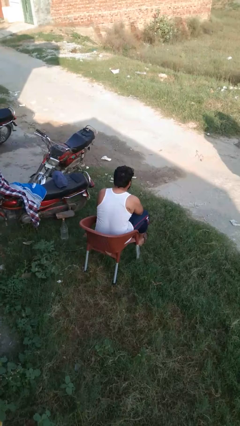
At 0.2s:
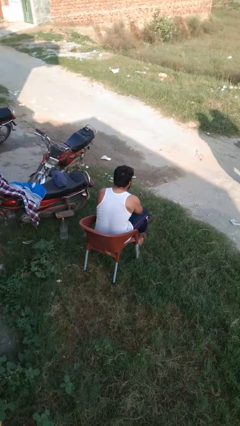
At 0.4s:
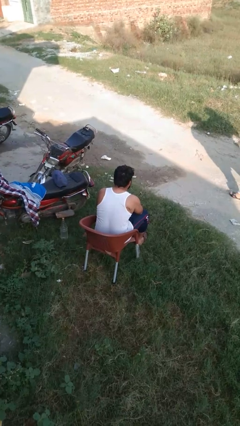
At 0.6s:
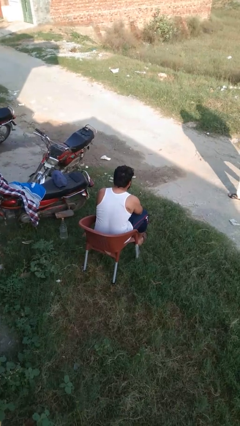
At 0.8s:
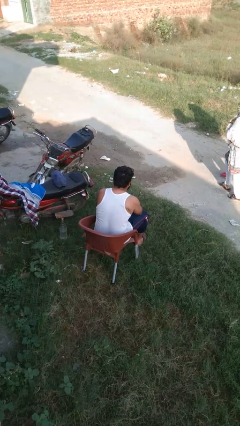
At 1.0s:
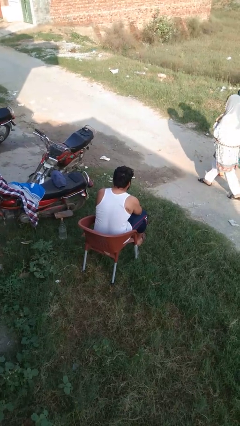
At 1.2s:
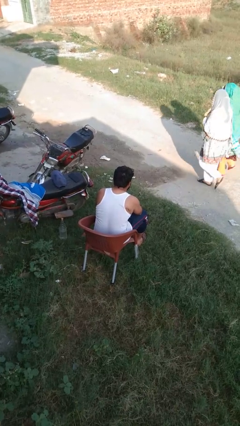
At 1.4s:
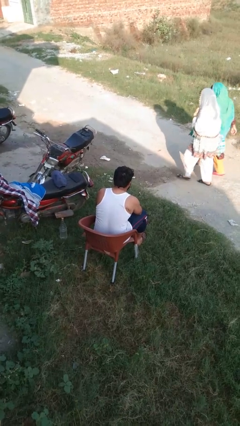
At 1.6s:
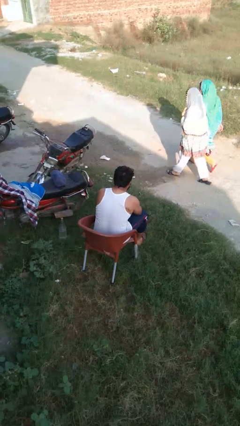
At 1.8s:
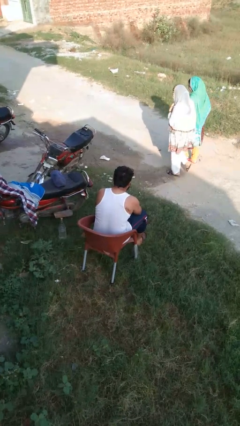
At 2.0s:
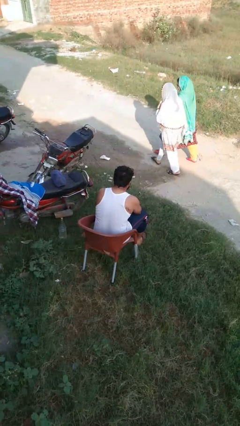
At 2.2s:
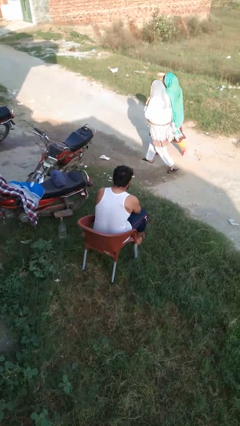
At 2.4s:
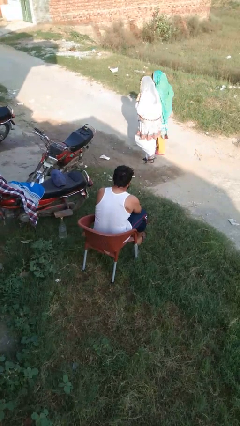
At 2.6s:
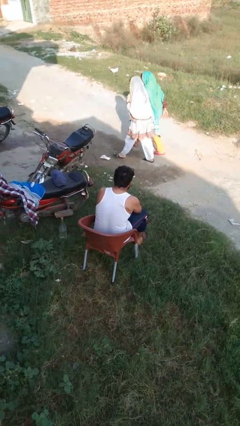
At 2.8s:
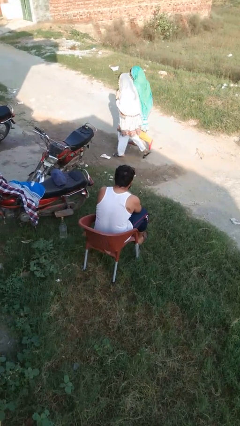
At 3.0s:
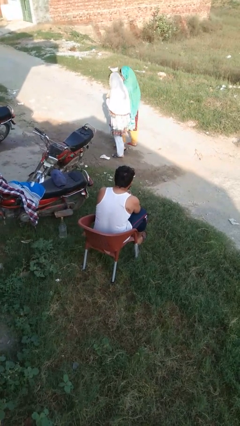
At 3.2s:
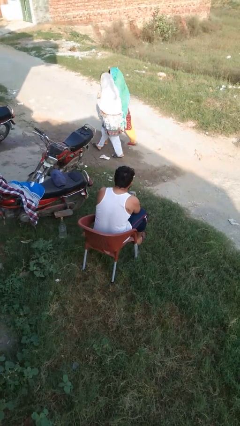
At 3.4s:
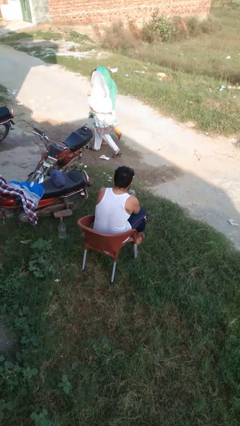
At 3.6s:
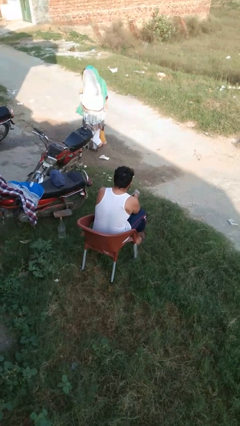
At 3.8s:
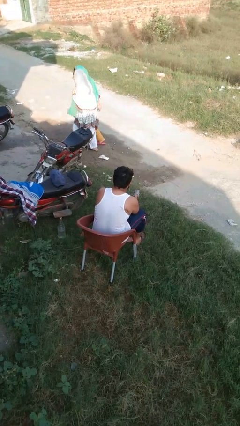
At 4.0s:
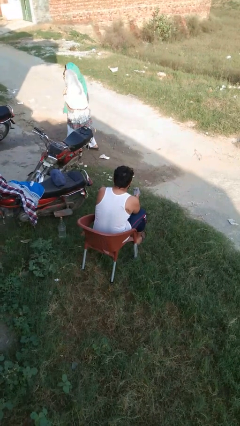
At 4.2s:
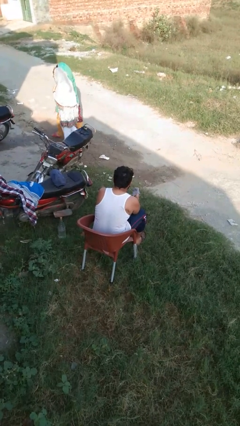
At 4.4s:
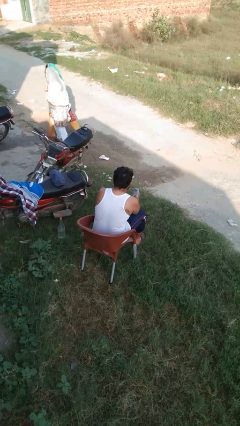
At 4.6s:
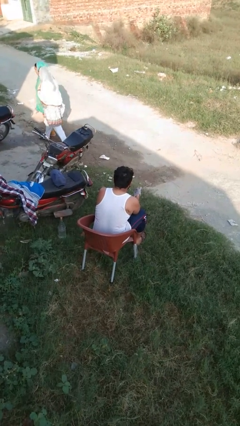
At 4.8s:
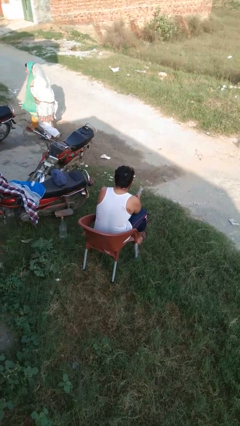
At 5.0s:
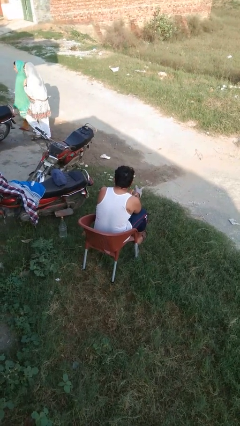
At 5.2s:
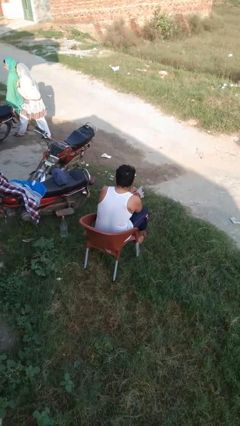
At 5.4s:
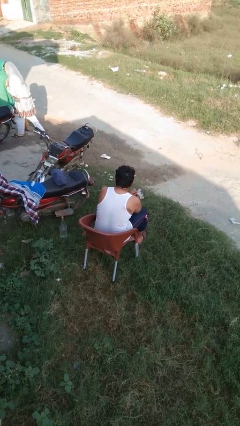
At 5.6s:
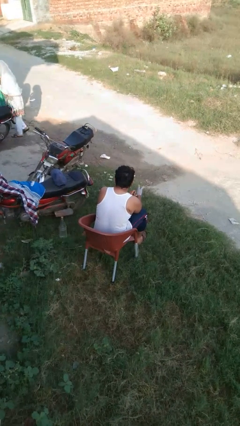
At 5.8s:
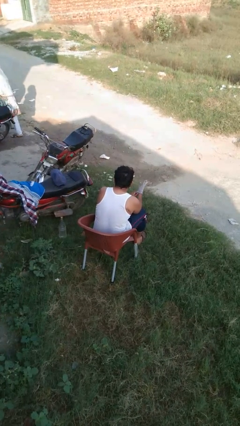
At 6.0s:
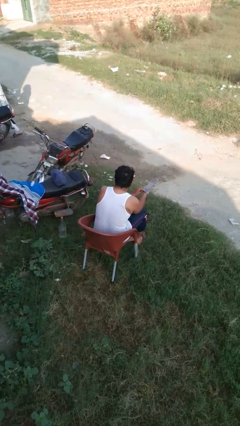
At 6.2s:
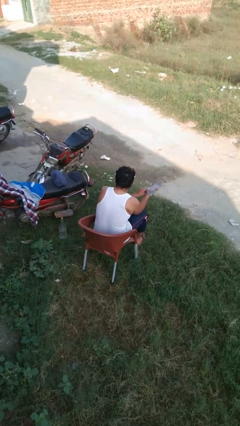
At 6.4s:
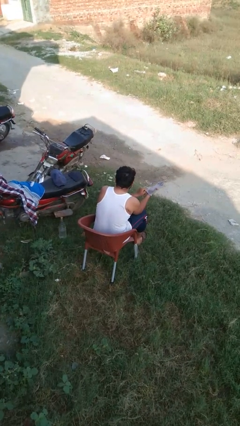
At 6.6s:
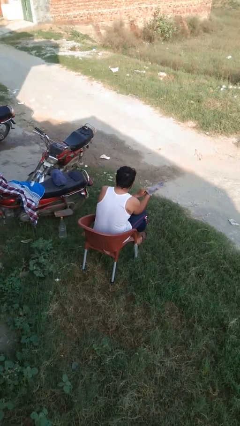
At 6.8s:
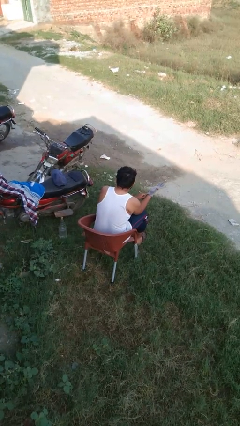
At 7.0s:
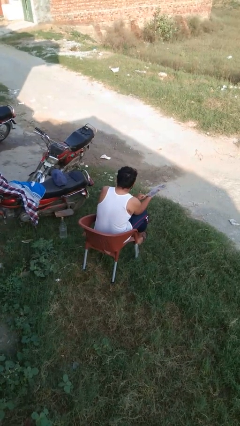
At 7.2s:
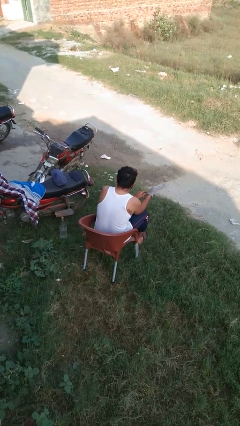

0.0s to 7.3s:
person puts on gloves

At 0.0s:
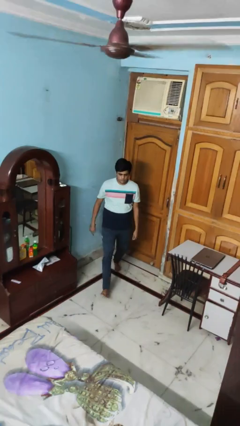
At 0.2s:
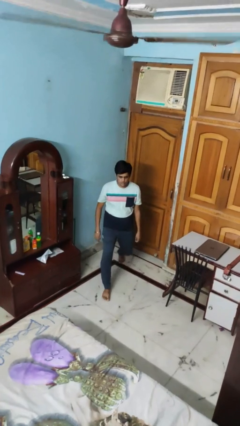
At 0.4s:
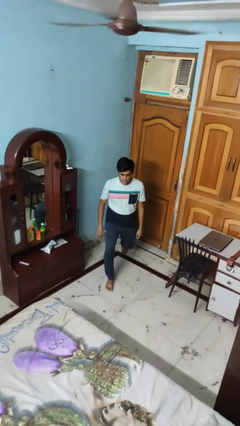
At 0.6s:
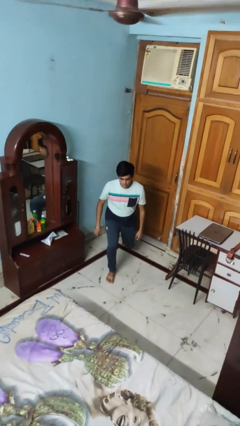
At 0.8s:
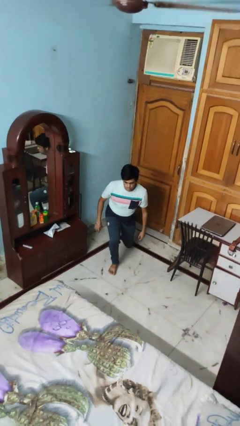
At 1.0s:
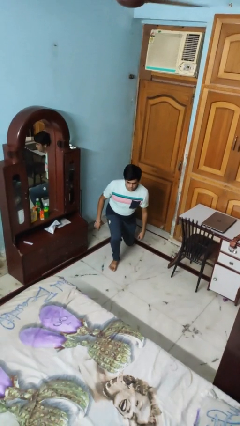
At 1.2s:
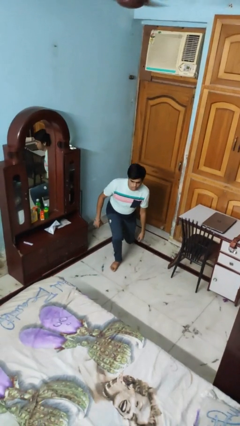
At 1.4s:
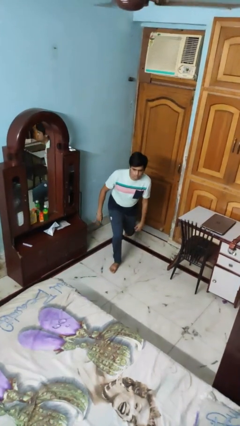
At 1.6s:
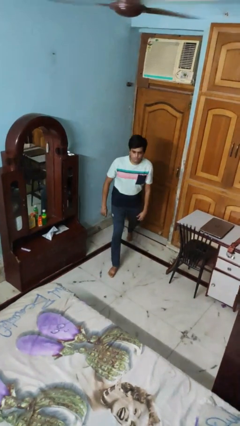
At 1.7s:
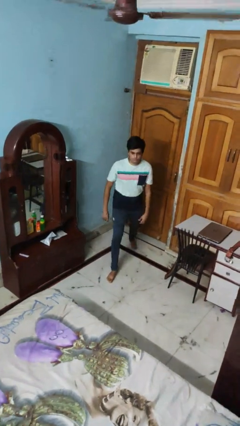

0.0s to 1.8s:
person exercises with lunges

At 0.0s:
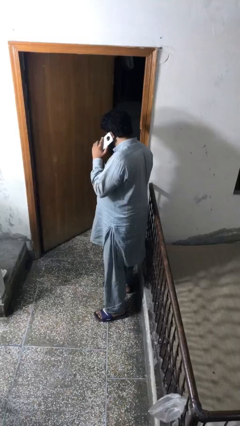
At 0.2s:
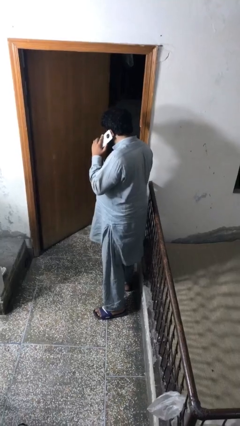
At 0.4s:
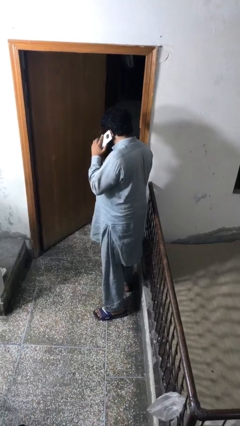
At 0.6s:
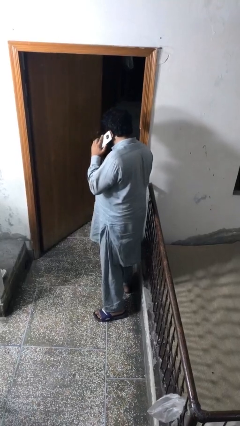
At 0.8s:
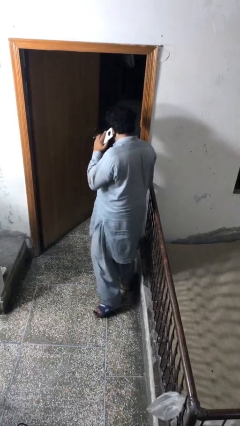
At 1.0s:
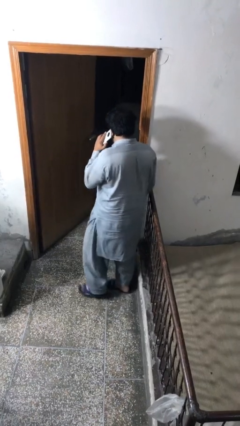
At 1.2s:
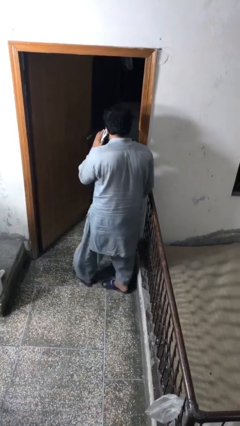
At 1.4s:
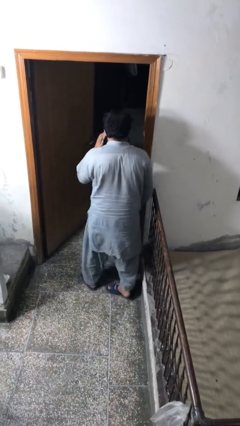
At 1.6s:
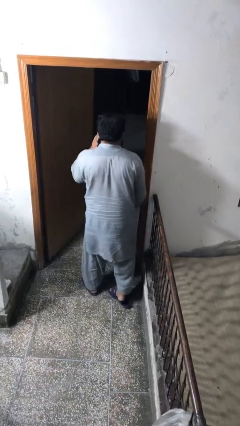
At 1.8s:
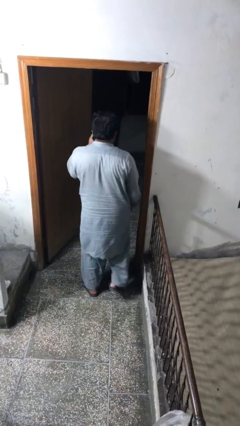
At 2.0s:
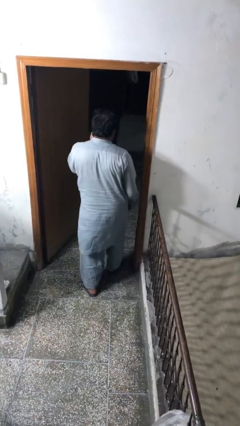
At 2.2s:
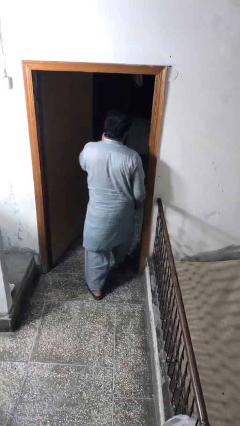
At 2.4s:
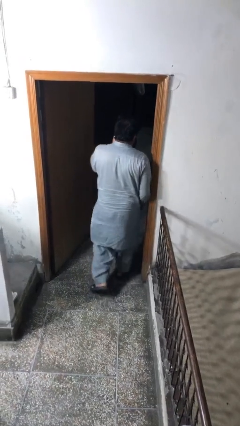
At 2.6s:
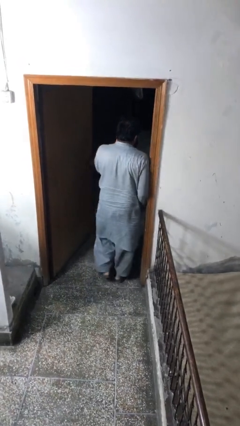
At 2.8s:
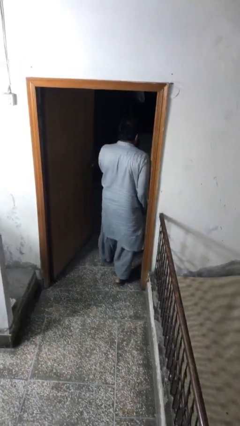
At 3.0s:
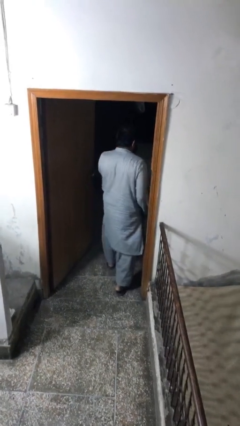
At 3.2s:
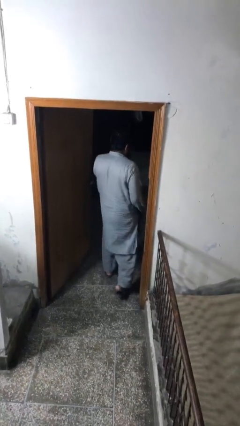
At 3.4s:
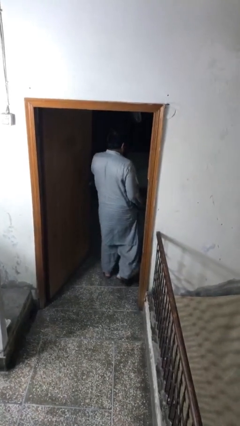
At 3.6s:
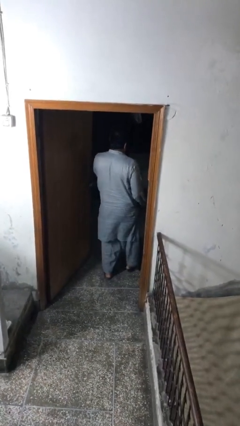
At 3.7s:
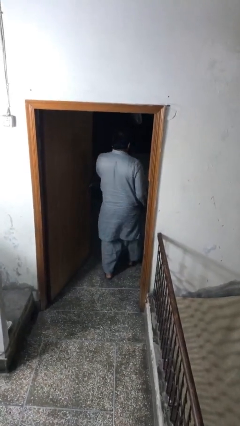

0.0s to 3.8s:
person exits scene through structure

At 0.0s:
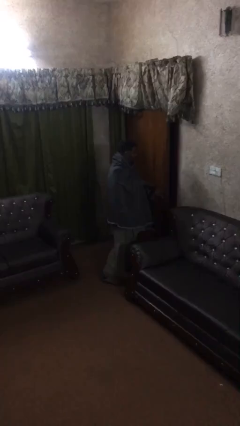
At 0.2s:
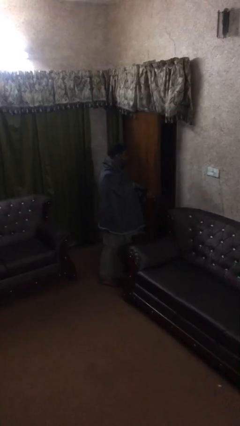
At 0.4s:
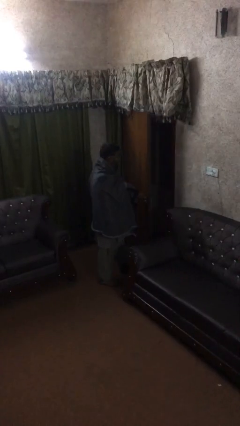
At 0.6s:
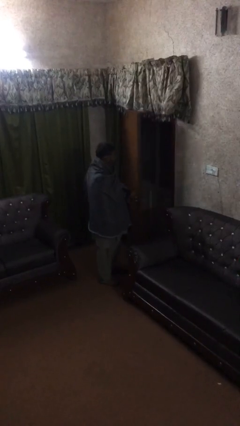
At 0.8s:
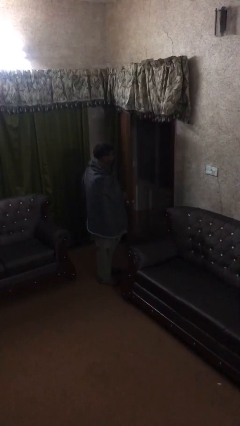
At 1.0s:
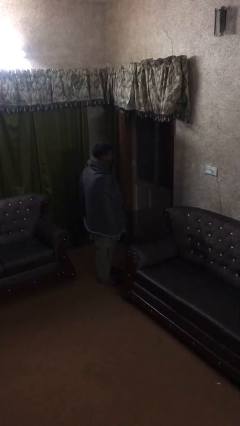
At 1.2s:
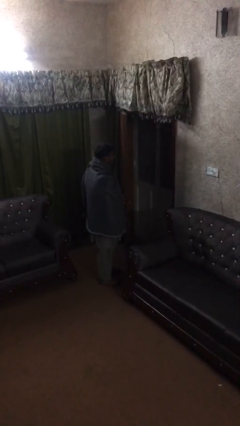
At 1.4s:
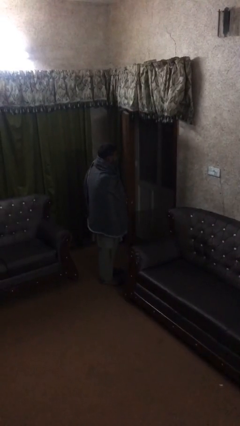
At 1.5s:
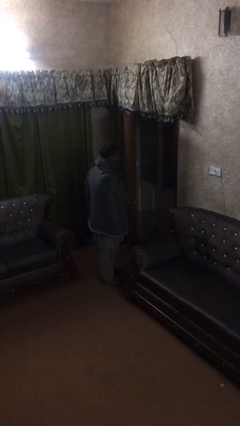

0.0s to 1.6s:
person opens facility door

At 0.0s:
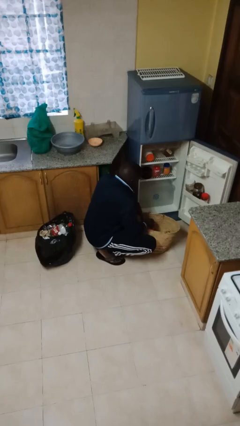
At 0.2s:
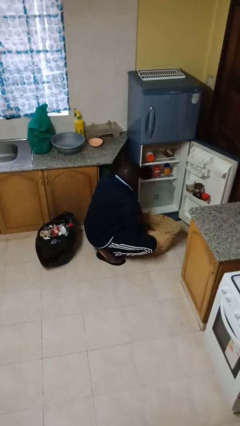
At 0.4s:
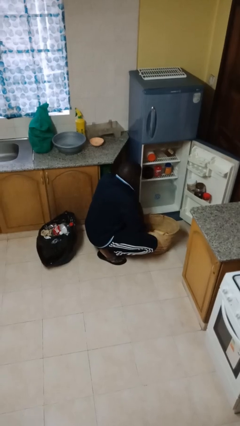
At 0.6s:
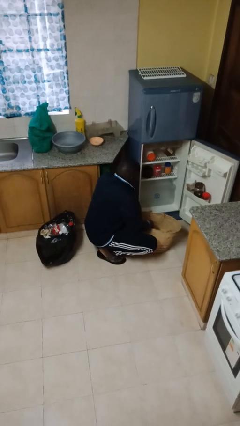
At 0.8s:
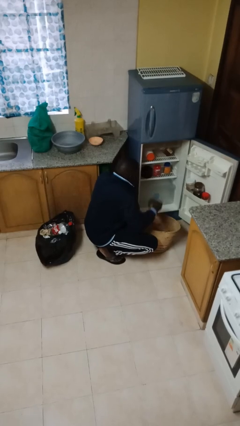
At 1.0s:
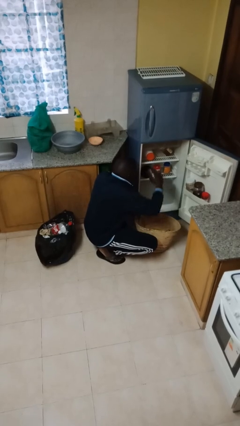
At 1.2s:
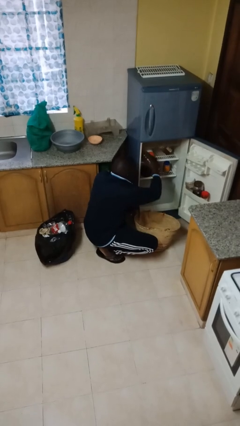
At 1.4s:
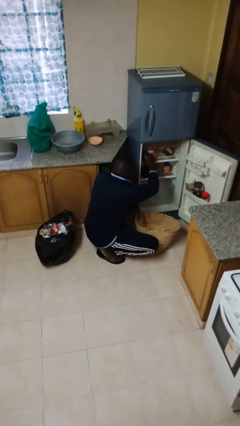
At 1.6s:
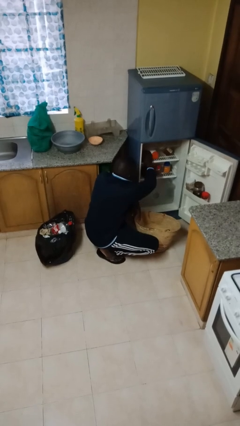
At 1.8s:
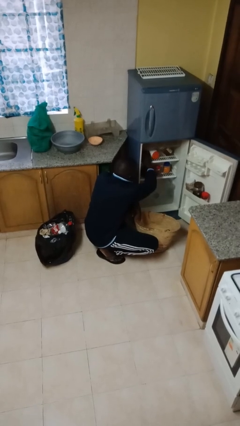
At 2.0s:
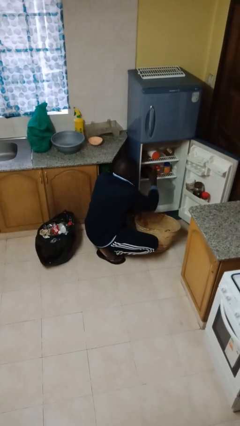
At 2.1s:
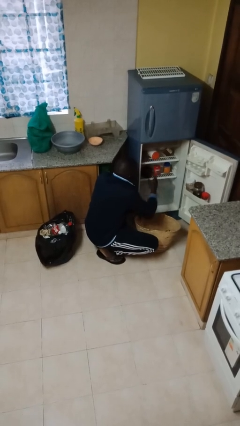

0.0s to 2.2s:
person loads groceries into refrigerator

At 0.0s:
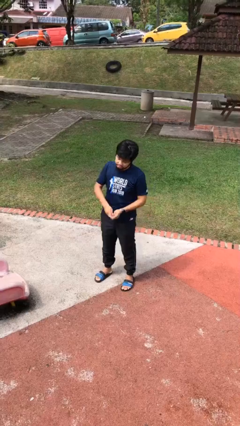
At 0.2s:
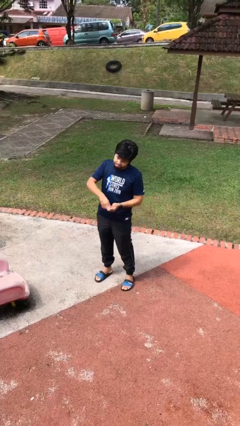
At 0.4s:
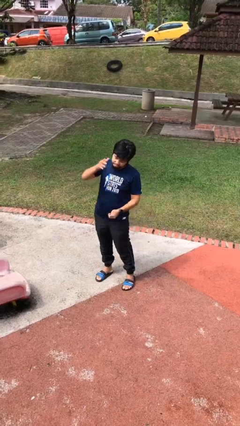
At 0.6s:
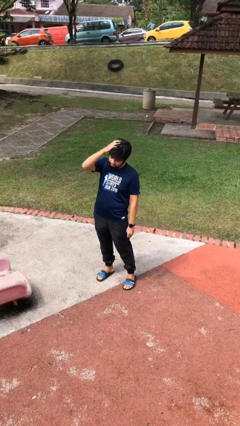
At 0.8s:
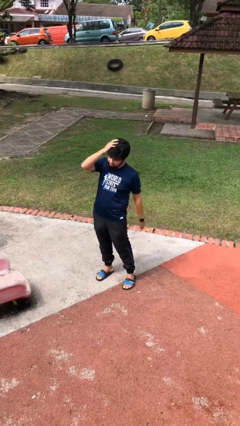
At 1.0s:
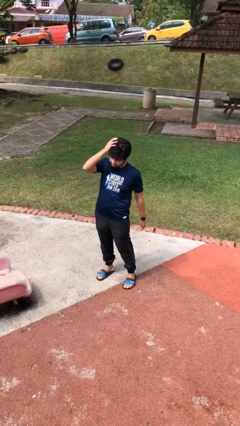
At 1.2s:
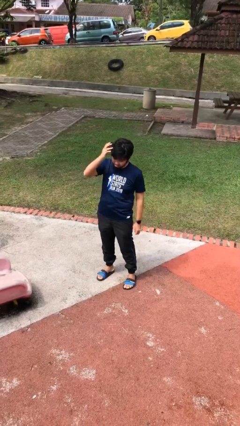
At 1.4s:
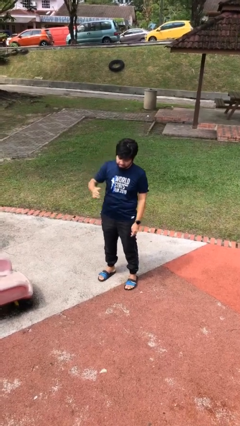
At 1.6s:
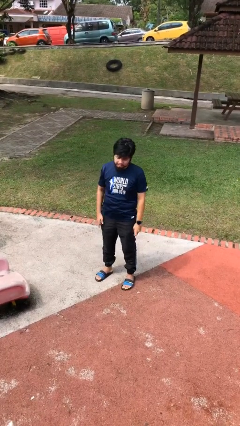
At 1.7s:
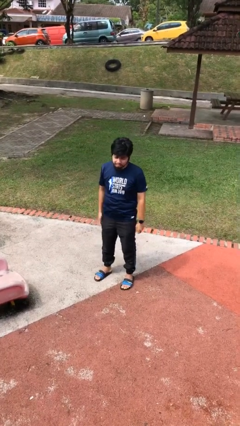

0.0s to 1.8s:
person pats head
